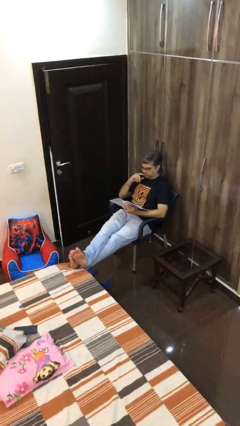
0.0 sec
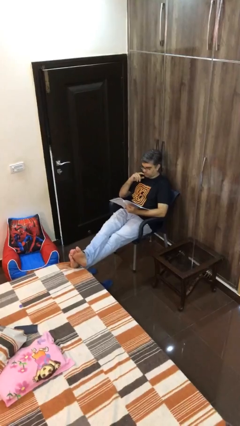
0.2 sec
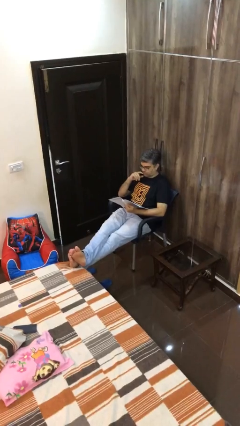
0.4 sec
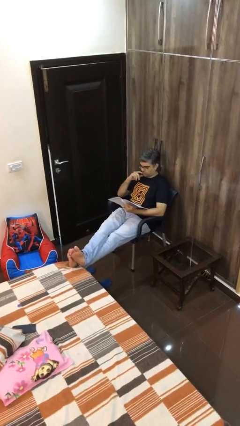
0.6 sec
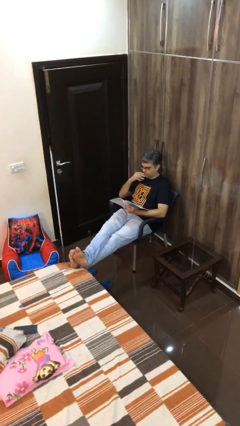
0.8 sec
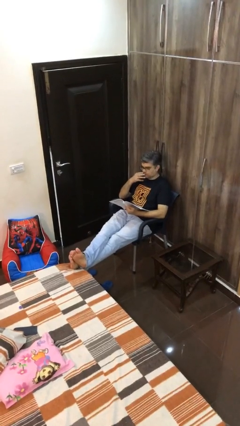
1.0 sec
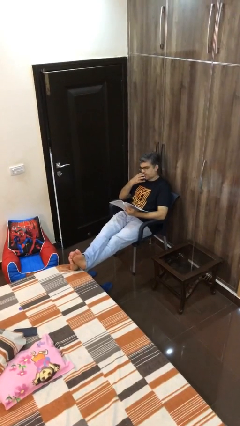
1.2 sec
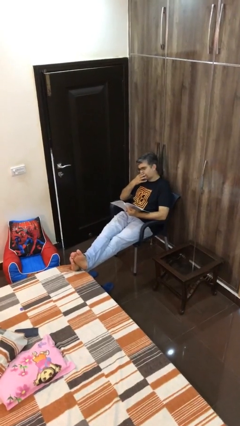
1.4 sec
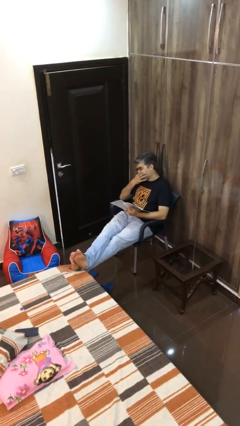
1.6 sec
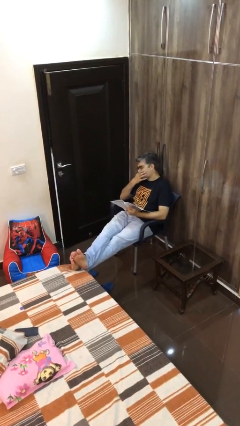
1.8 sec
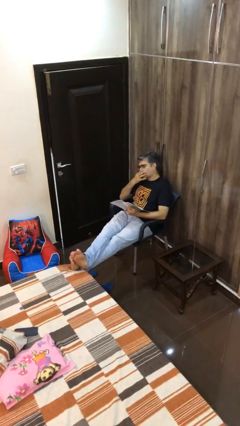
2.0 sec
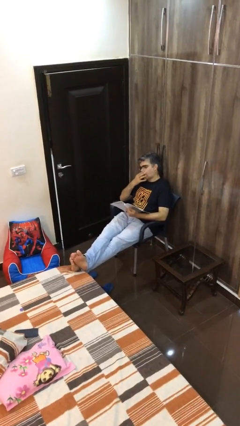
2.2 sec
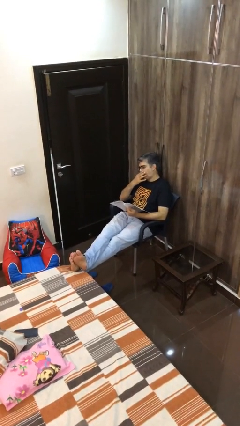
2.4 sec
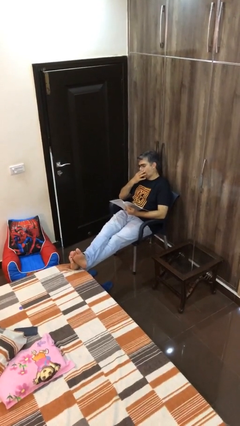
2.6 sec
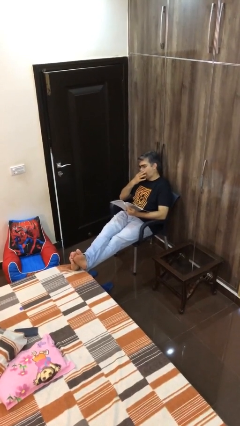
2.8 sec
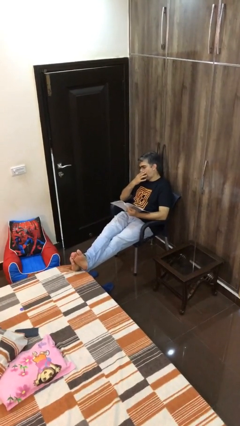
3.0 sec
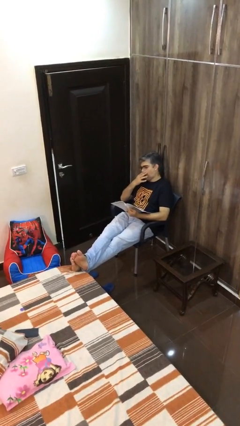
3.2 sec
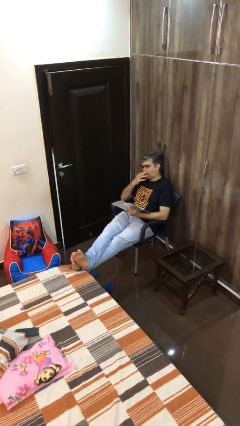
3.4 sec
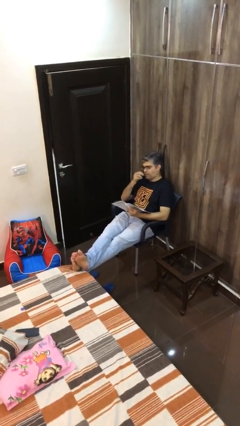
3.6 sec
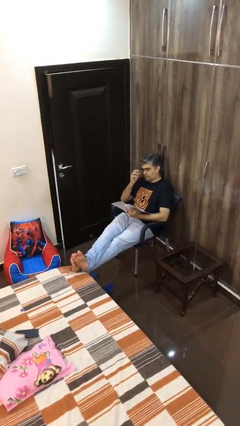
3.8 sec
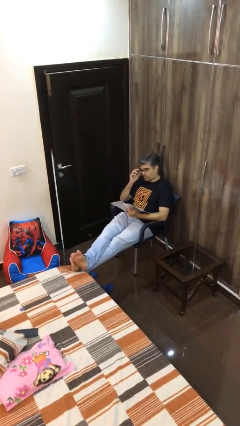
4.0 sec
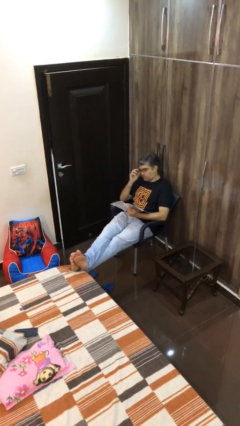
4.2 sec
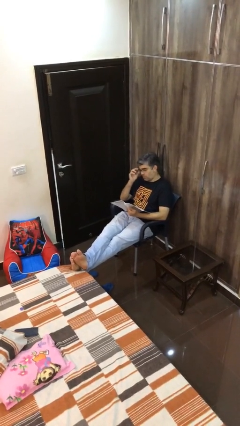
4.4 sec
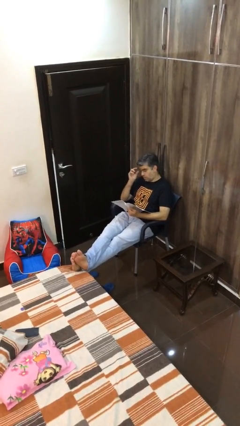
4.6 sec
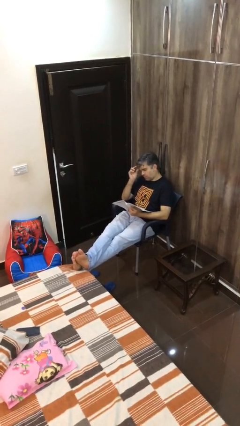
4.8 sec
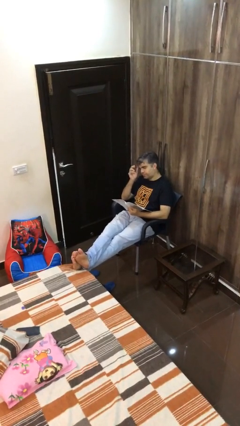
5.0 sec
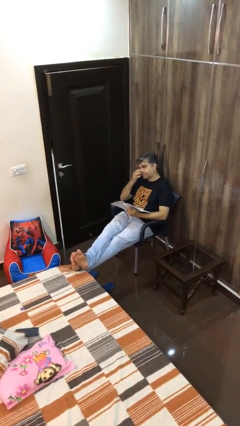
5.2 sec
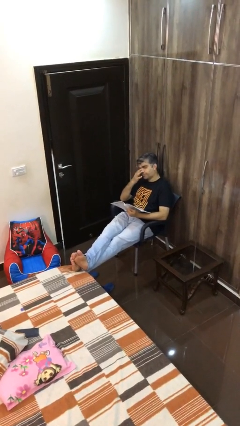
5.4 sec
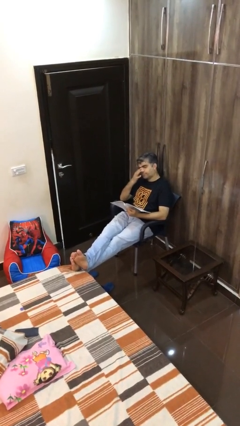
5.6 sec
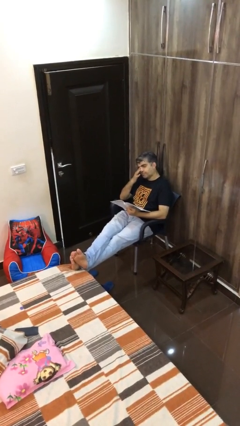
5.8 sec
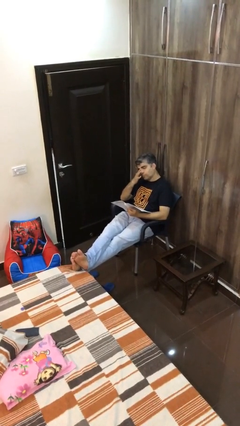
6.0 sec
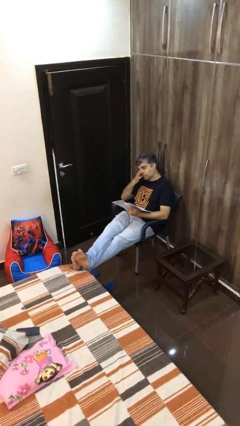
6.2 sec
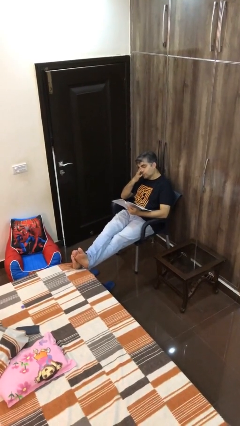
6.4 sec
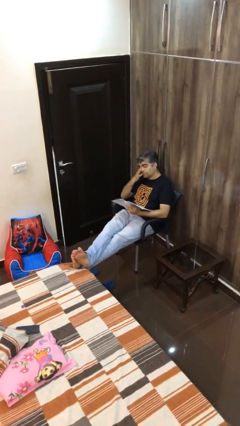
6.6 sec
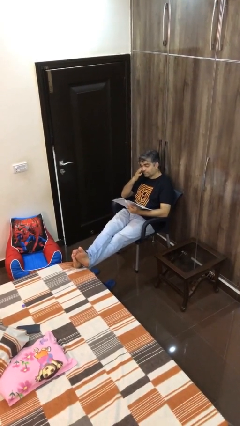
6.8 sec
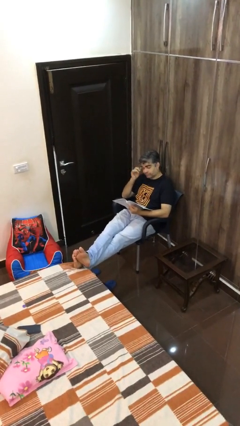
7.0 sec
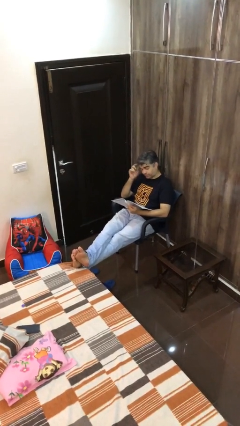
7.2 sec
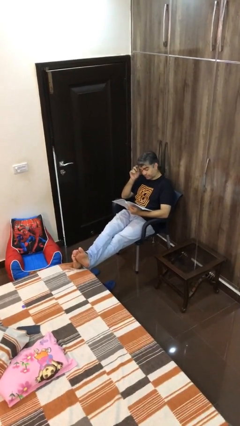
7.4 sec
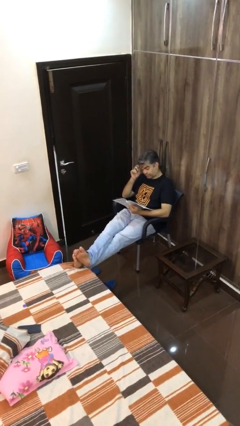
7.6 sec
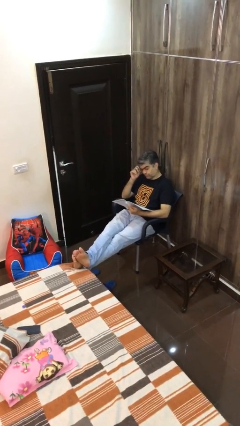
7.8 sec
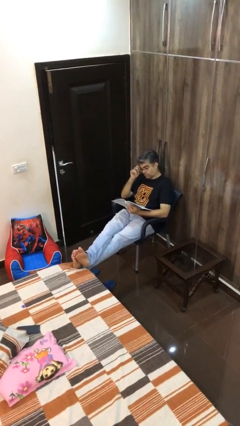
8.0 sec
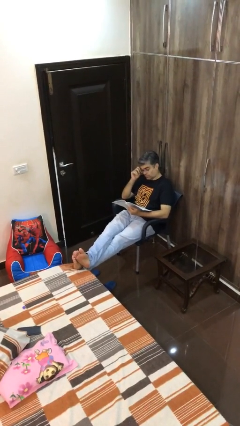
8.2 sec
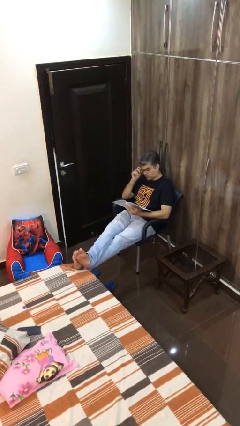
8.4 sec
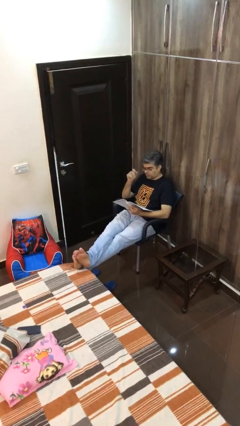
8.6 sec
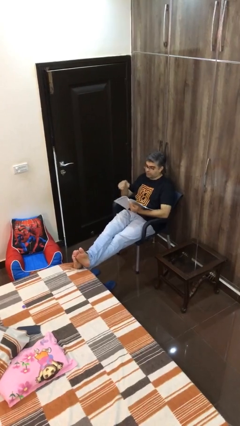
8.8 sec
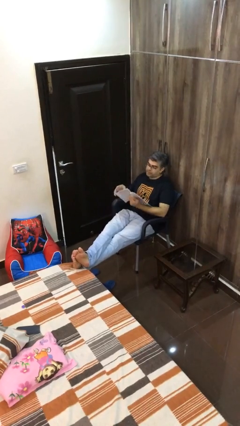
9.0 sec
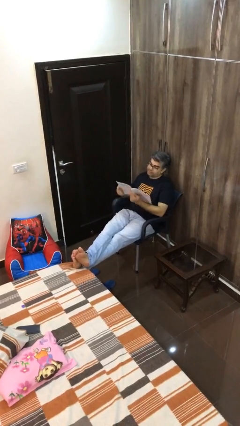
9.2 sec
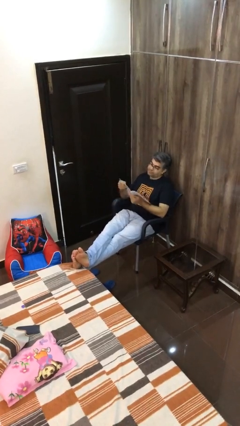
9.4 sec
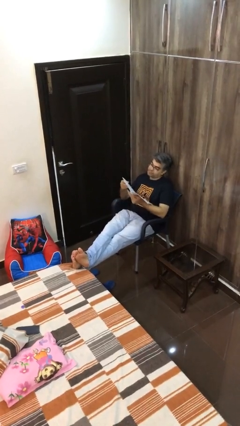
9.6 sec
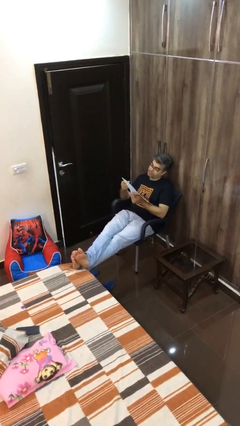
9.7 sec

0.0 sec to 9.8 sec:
person reads document

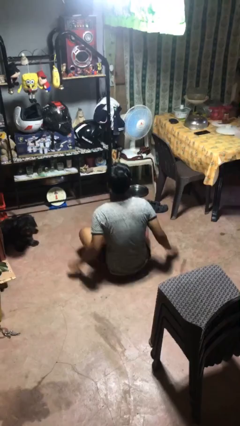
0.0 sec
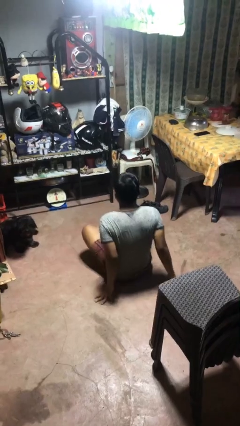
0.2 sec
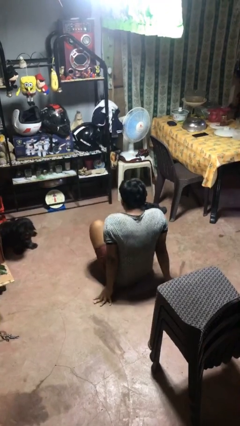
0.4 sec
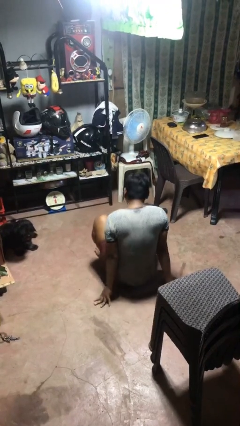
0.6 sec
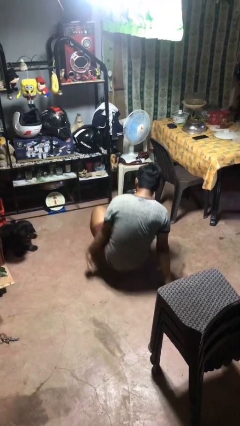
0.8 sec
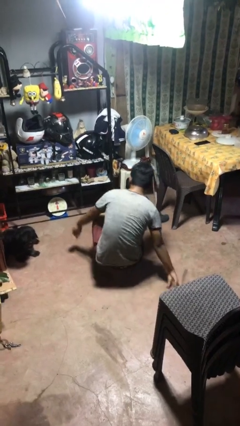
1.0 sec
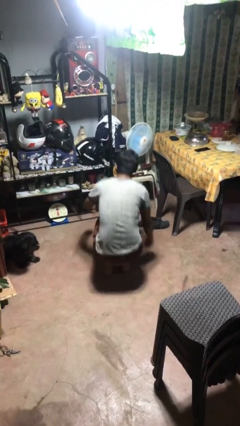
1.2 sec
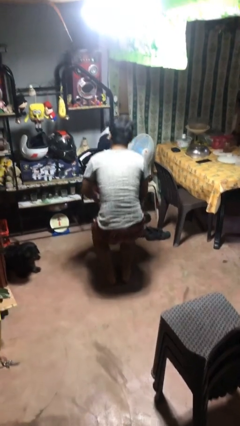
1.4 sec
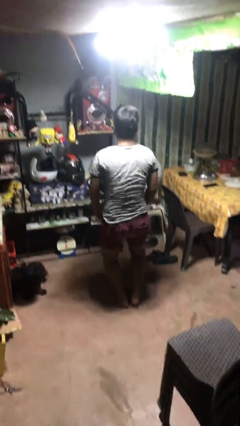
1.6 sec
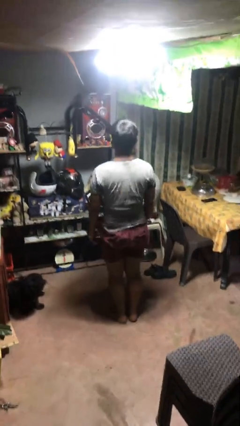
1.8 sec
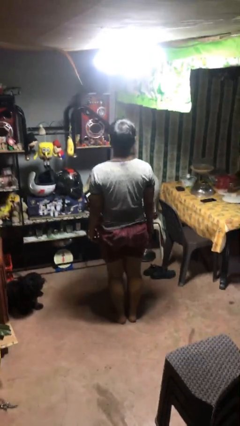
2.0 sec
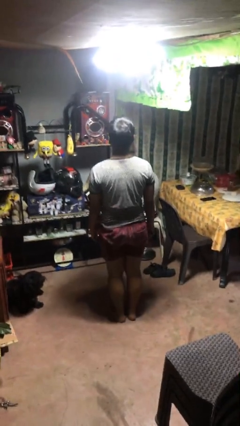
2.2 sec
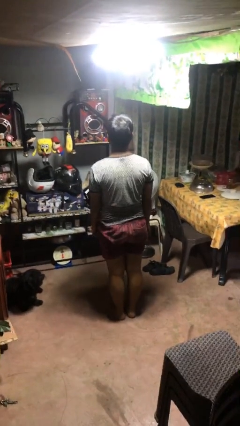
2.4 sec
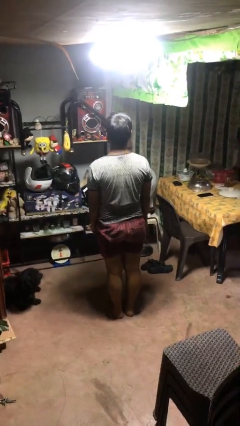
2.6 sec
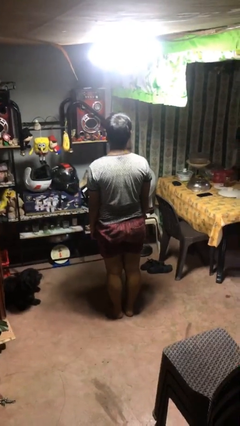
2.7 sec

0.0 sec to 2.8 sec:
person stands up from floor

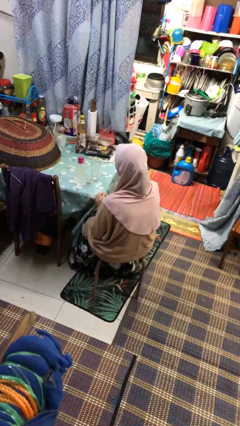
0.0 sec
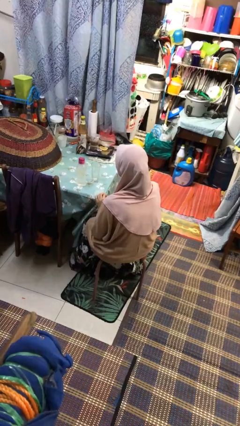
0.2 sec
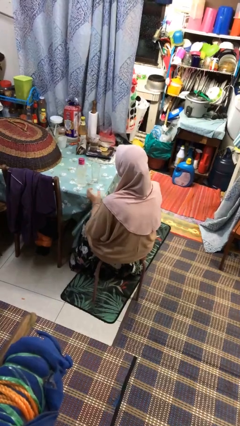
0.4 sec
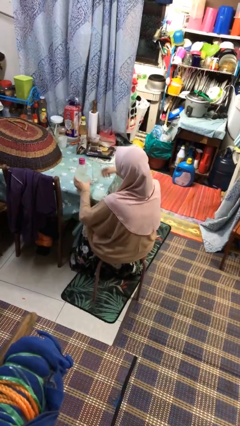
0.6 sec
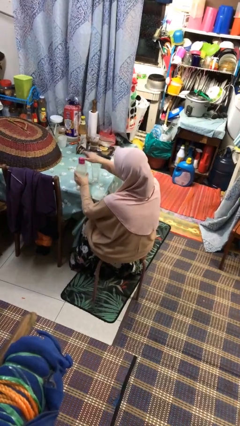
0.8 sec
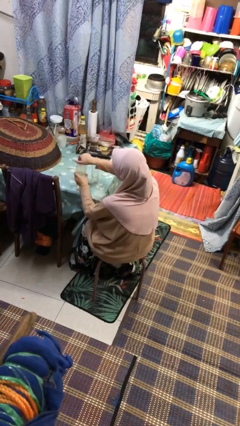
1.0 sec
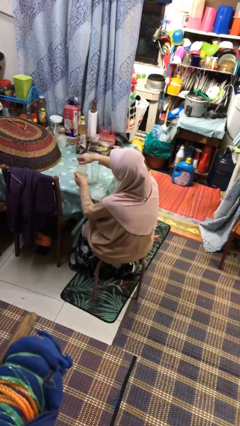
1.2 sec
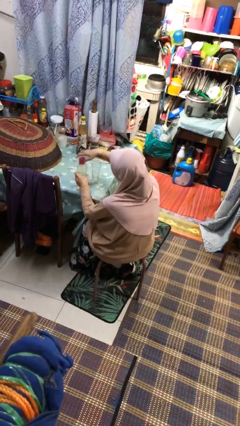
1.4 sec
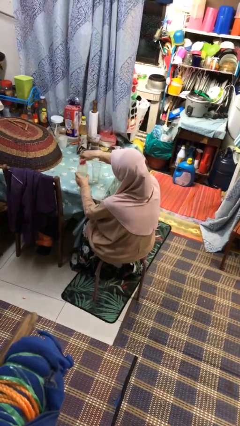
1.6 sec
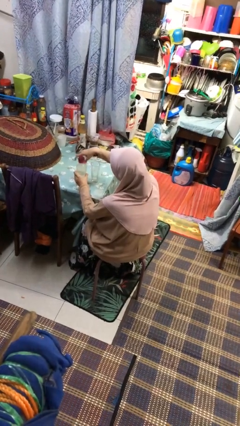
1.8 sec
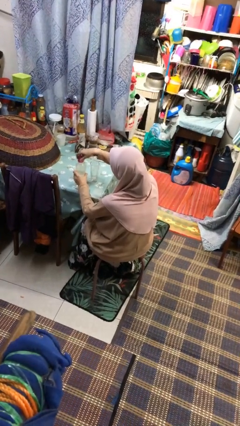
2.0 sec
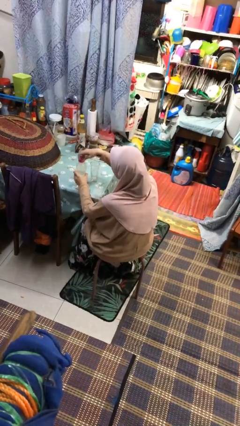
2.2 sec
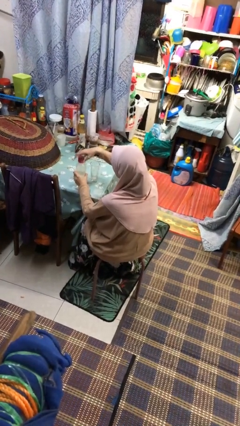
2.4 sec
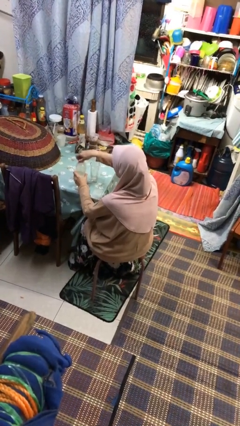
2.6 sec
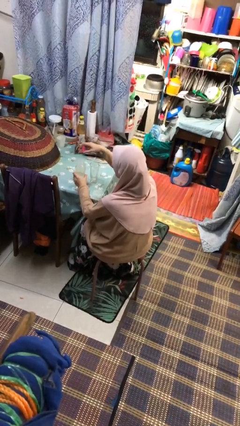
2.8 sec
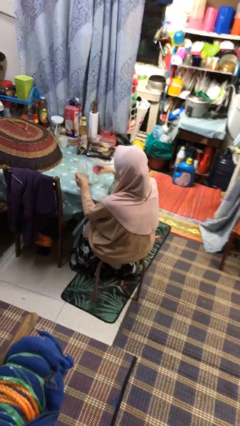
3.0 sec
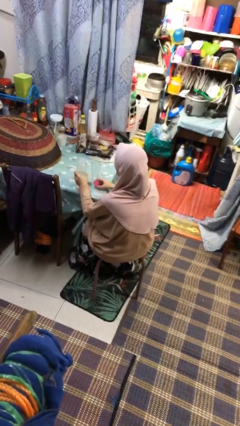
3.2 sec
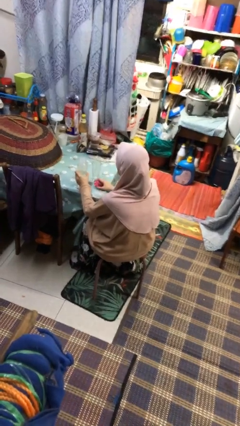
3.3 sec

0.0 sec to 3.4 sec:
person unscrews lid from bottle

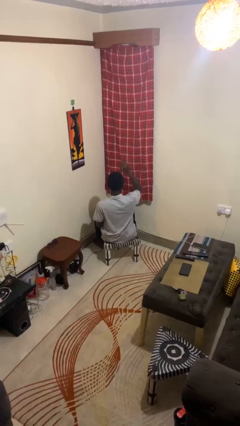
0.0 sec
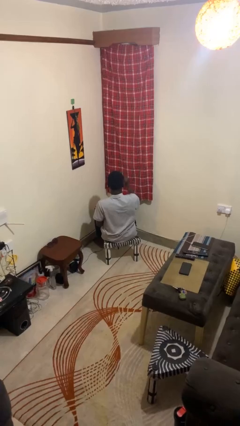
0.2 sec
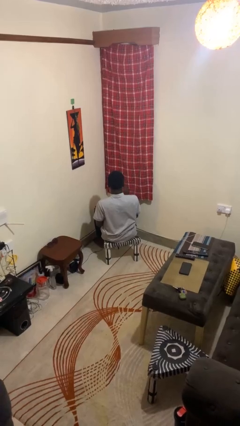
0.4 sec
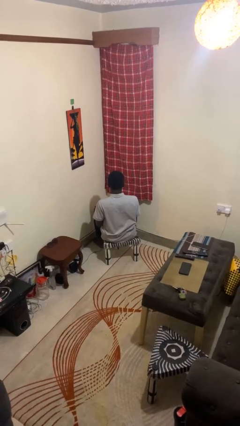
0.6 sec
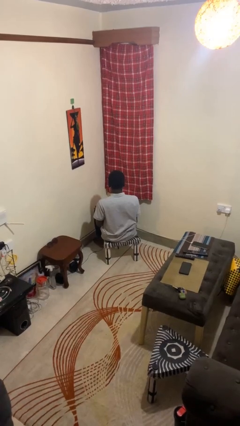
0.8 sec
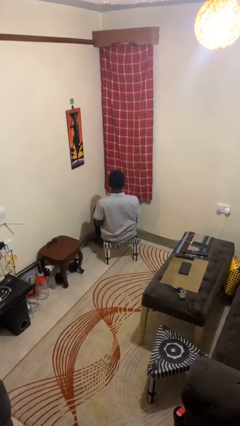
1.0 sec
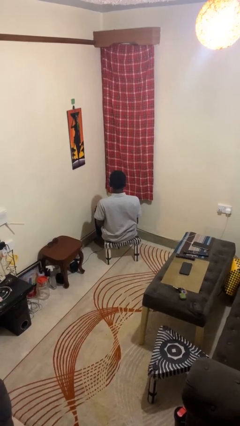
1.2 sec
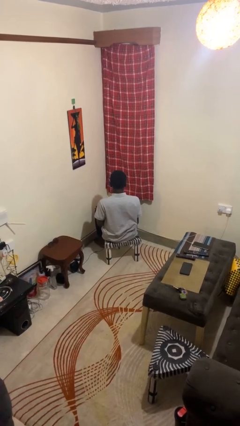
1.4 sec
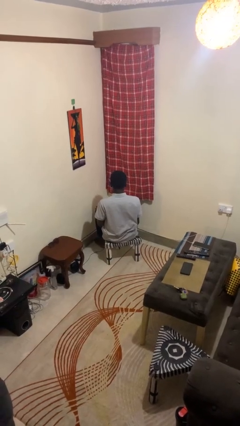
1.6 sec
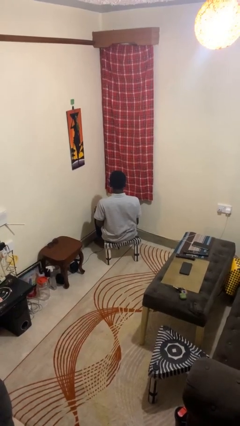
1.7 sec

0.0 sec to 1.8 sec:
person gestures lower hand
